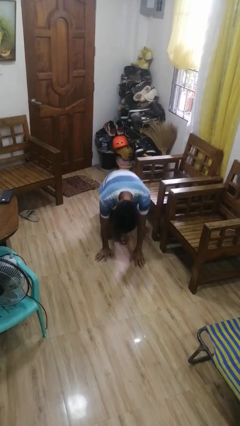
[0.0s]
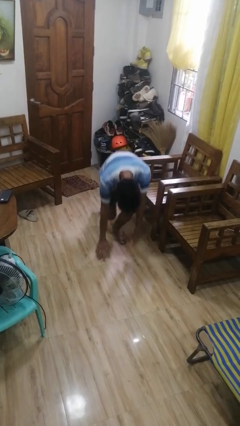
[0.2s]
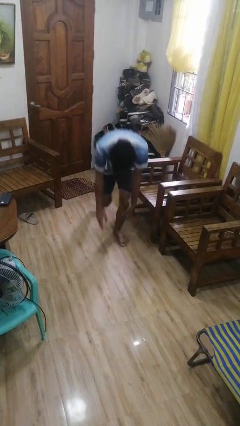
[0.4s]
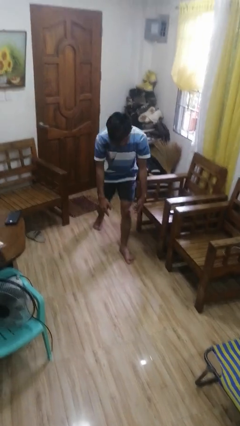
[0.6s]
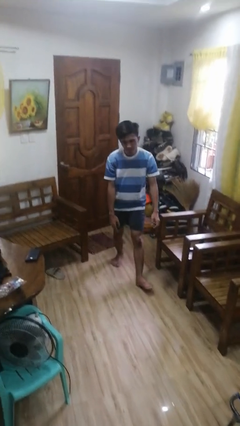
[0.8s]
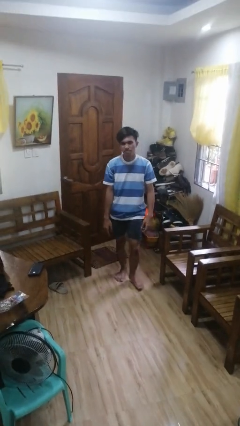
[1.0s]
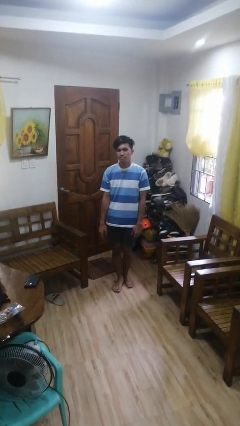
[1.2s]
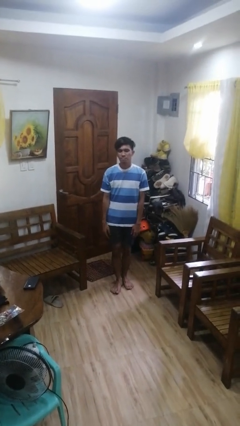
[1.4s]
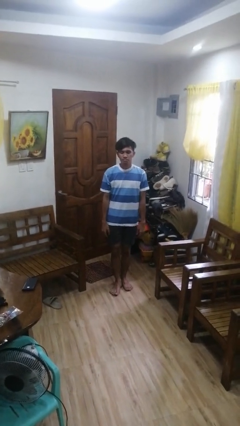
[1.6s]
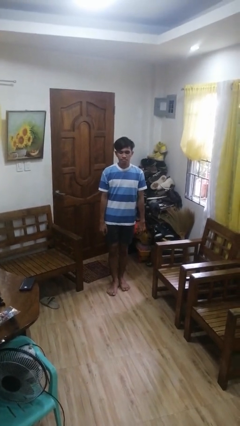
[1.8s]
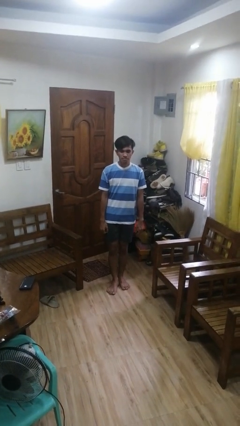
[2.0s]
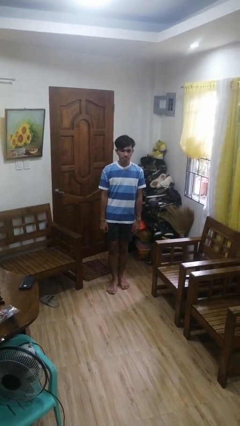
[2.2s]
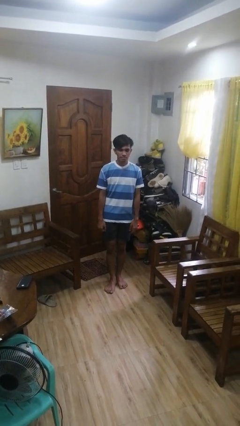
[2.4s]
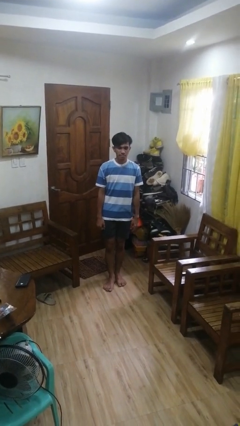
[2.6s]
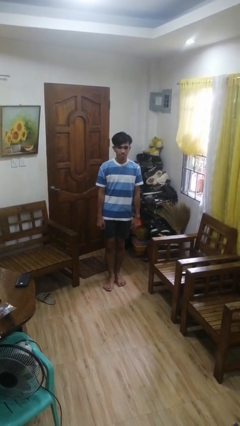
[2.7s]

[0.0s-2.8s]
person stands up from floor

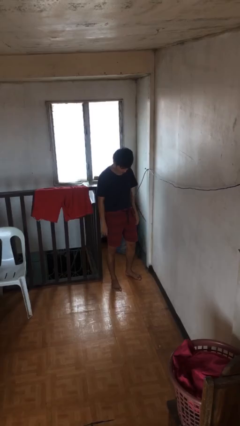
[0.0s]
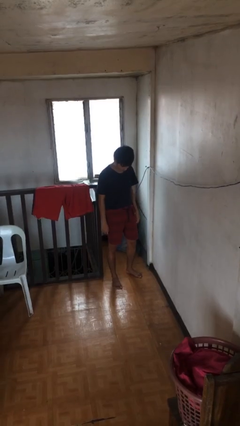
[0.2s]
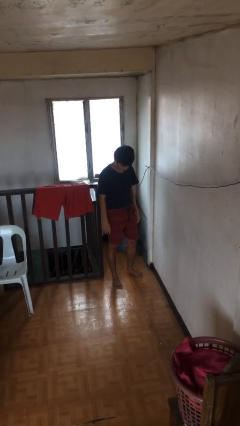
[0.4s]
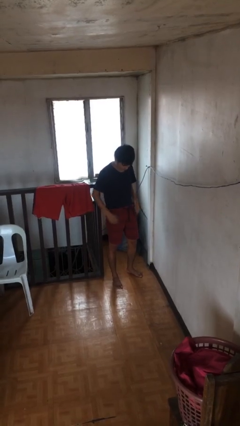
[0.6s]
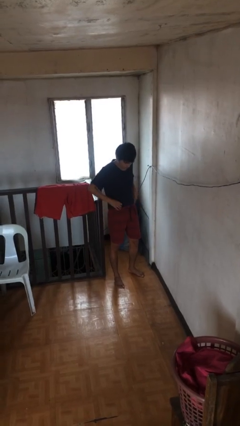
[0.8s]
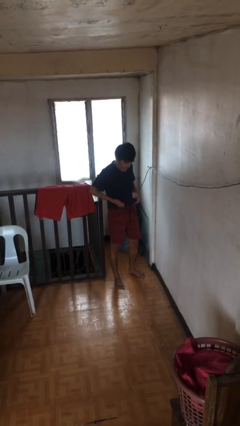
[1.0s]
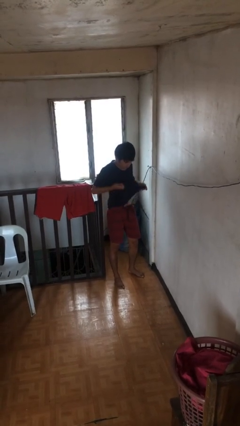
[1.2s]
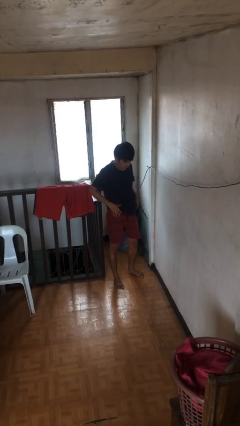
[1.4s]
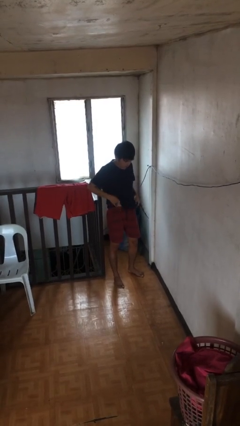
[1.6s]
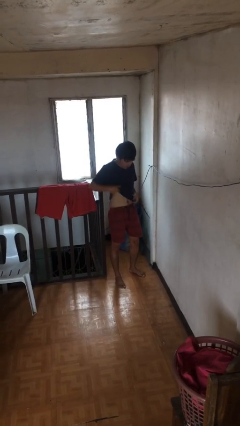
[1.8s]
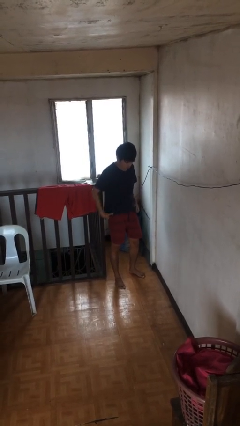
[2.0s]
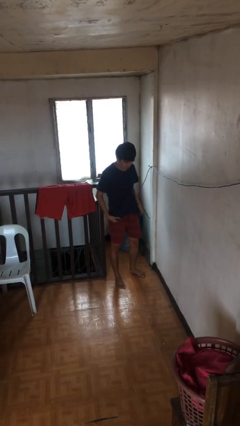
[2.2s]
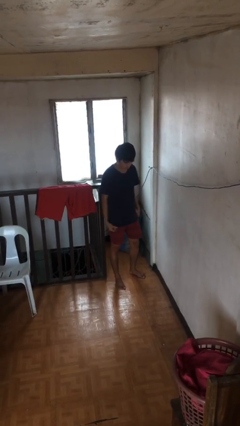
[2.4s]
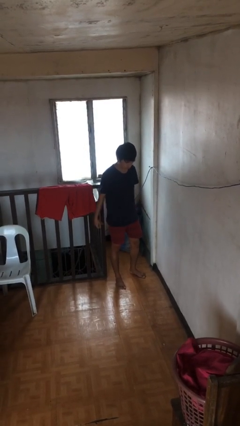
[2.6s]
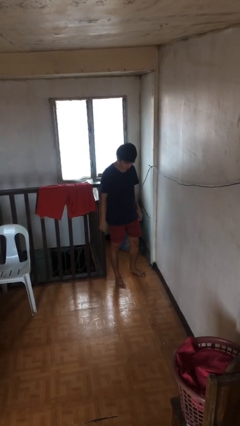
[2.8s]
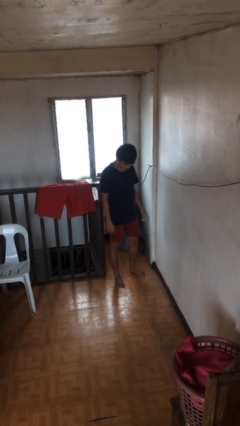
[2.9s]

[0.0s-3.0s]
person untucks shirt

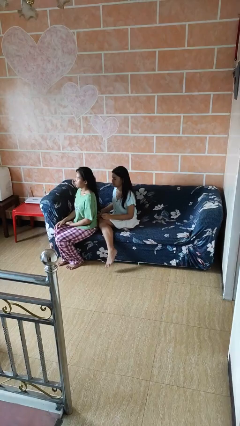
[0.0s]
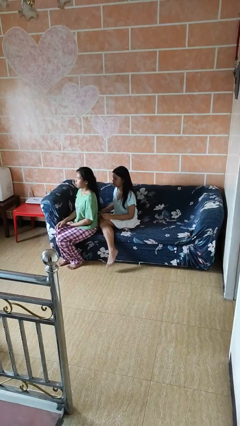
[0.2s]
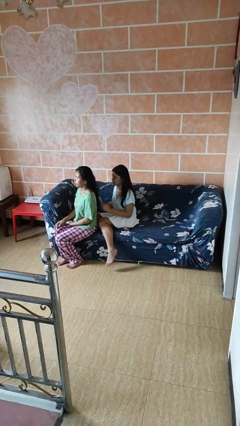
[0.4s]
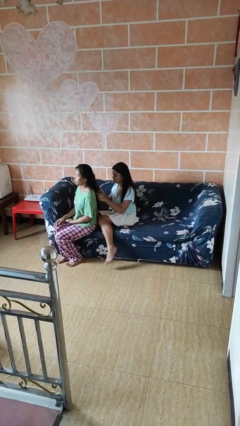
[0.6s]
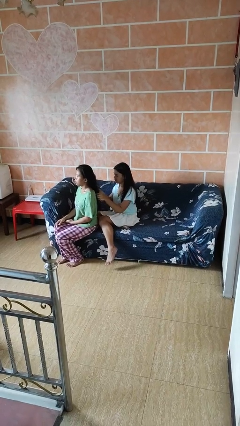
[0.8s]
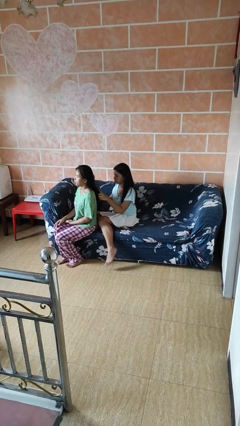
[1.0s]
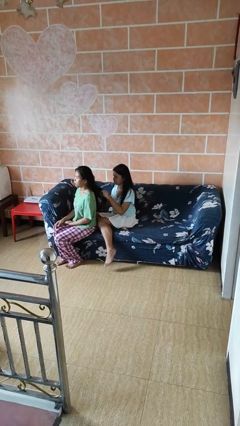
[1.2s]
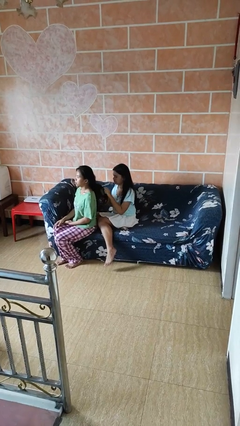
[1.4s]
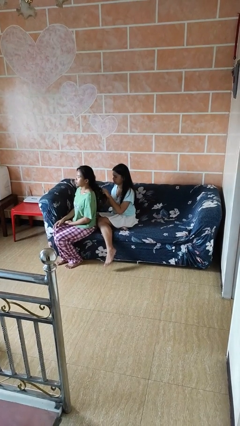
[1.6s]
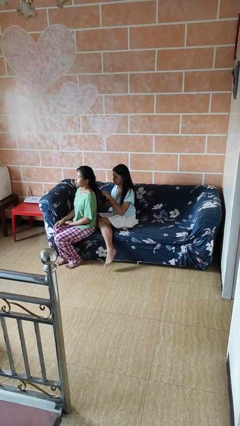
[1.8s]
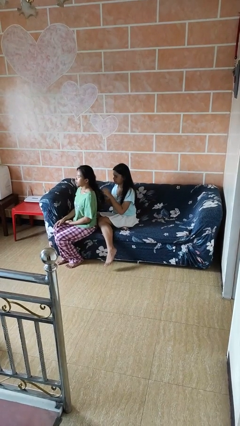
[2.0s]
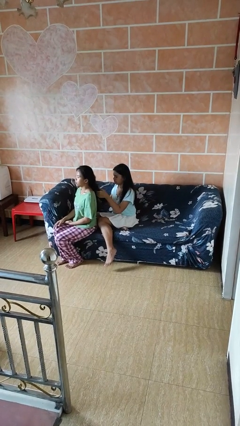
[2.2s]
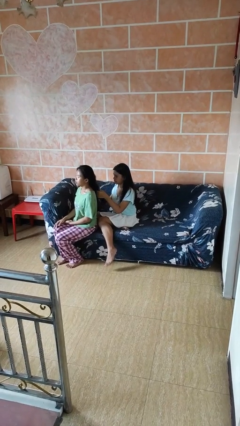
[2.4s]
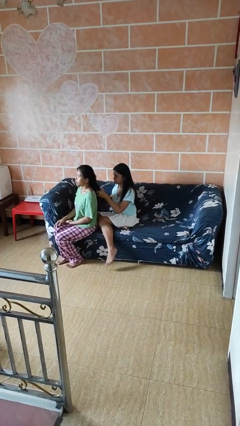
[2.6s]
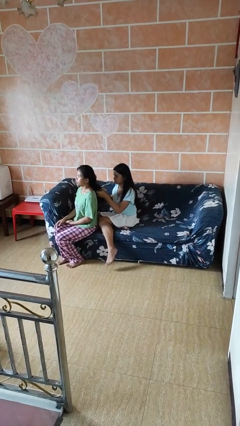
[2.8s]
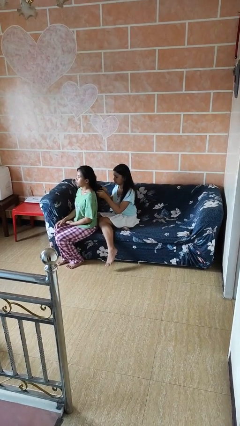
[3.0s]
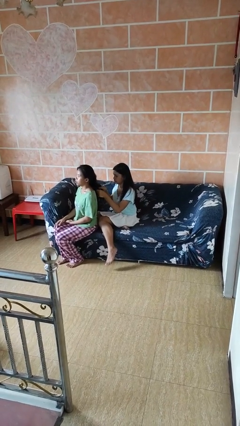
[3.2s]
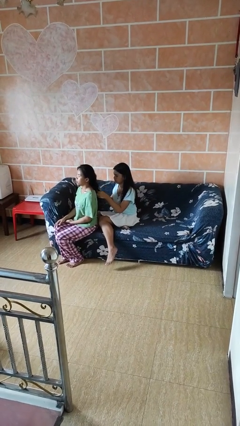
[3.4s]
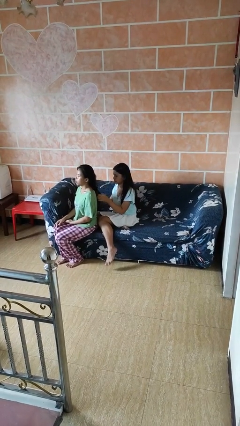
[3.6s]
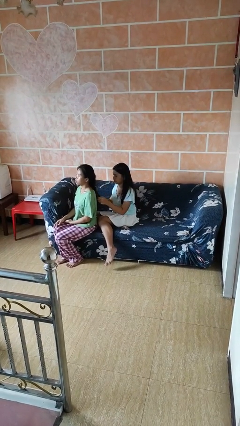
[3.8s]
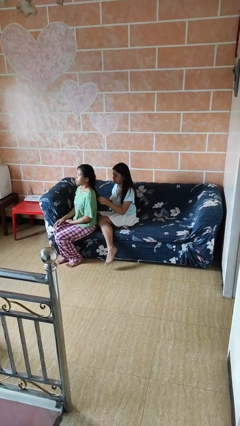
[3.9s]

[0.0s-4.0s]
person braids hair of person

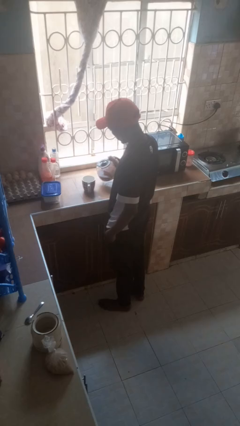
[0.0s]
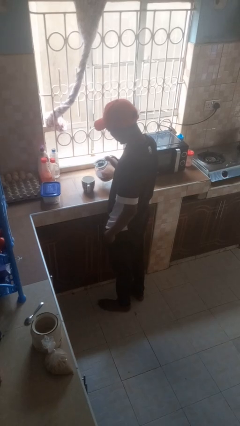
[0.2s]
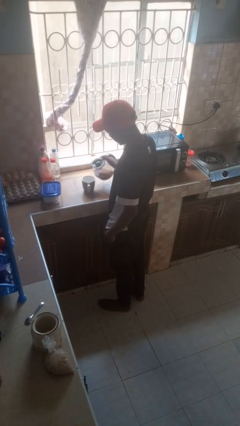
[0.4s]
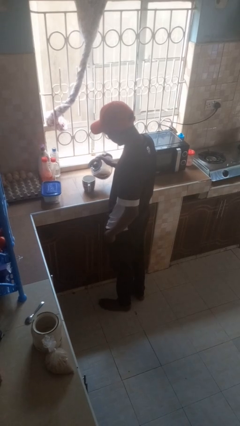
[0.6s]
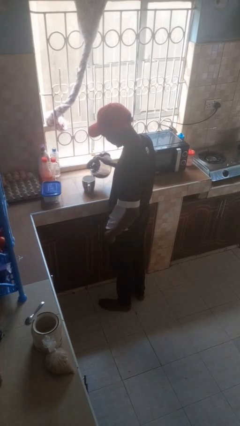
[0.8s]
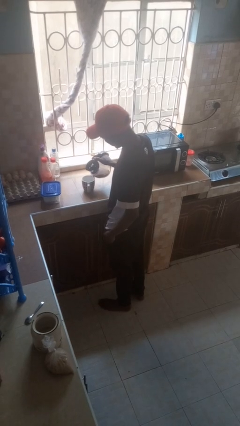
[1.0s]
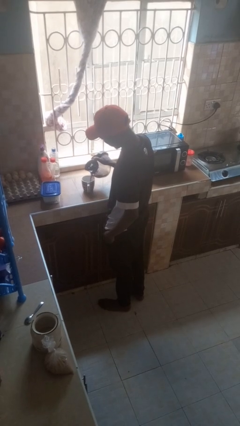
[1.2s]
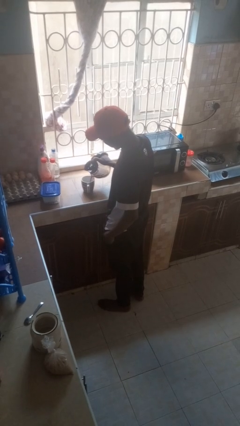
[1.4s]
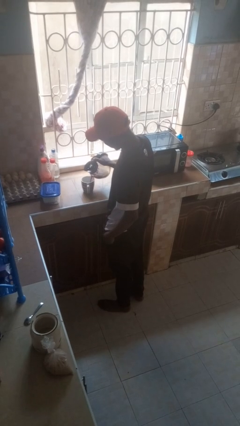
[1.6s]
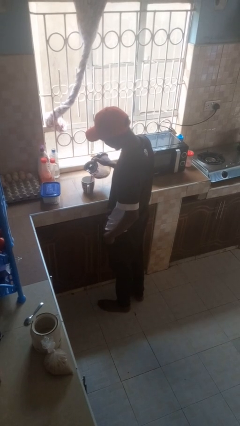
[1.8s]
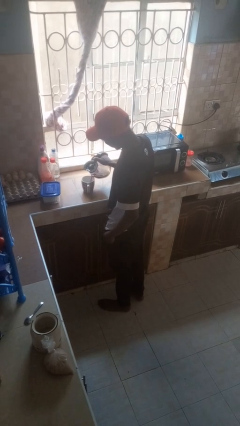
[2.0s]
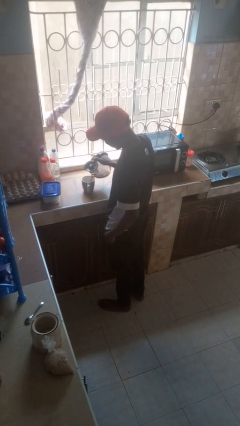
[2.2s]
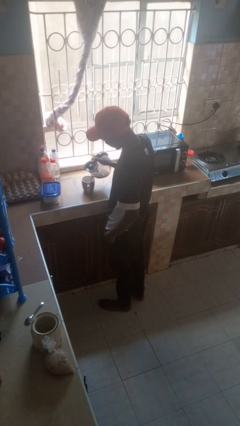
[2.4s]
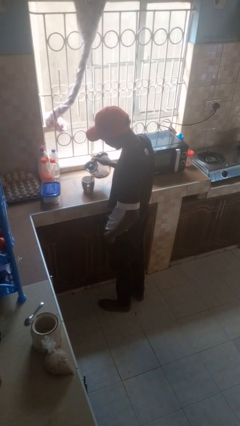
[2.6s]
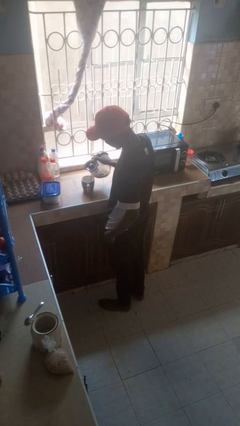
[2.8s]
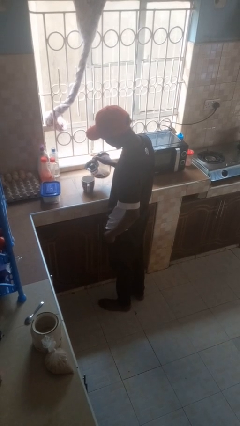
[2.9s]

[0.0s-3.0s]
person pours coffee into mug

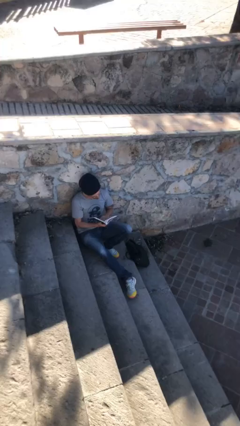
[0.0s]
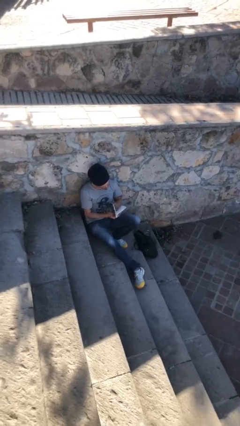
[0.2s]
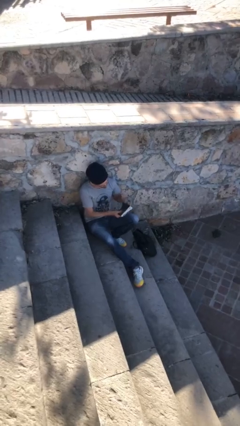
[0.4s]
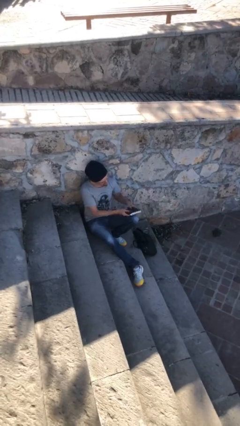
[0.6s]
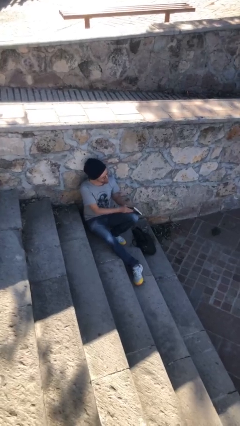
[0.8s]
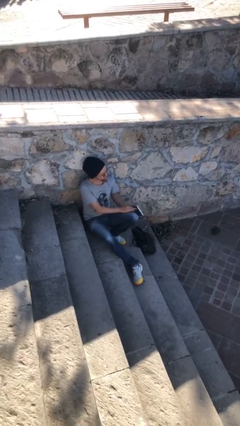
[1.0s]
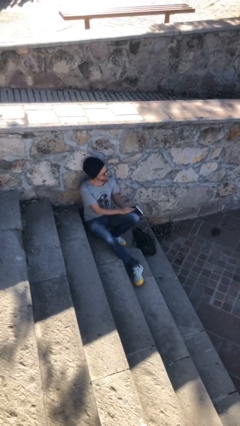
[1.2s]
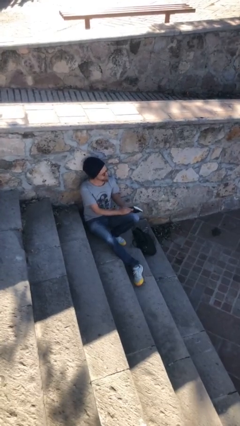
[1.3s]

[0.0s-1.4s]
person reads document

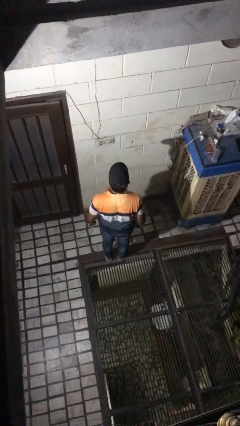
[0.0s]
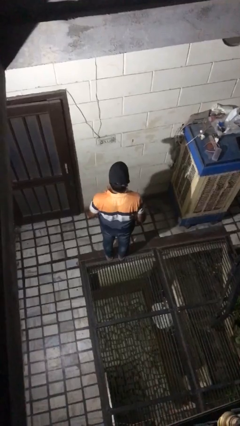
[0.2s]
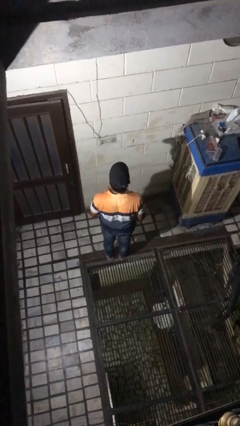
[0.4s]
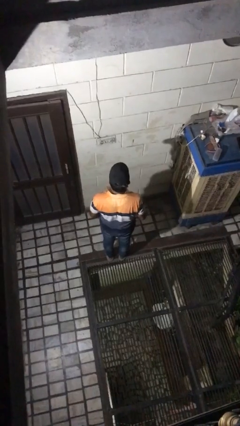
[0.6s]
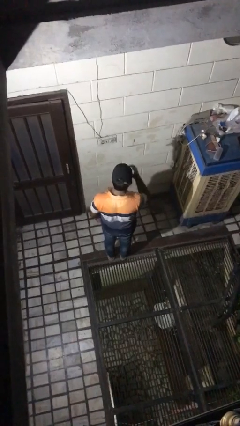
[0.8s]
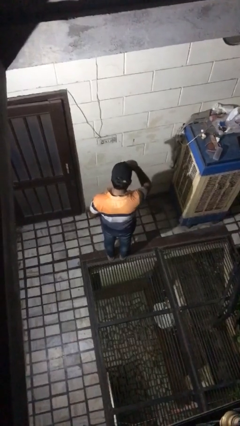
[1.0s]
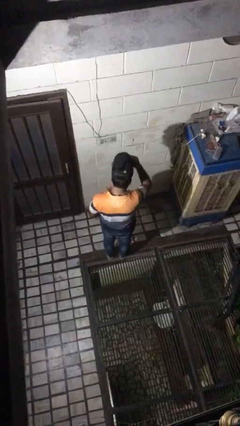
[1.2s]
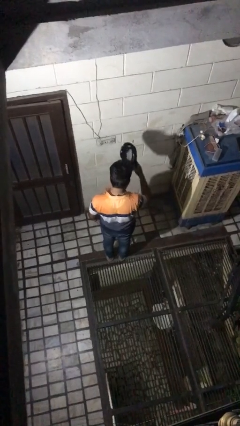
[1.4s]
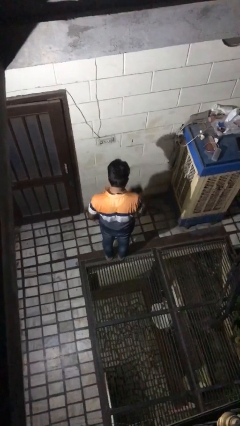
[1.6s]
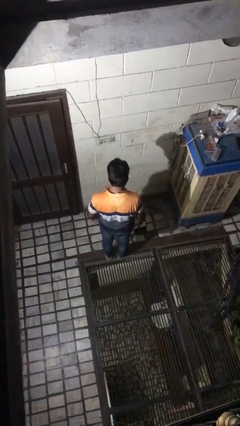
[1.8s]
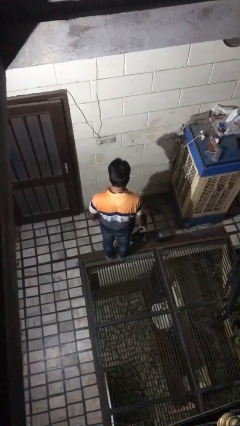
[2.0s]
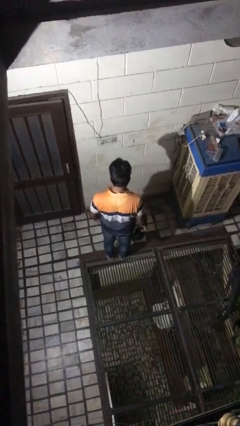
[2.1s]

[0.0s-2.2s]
person takes off hat

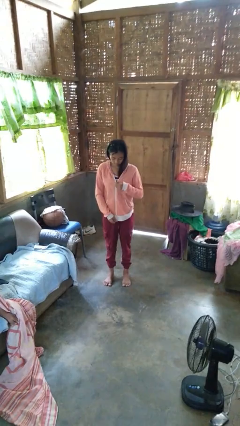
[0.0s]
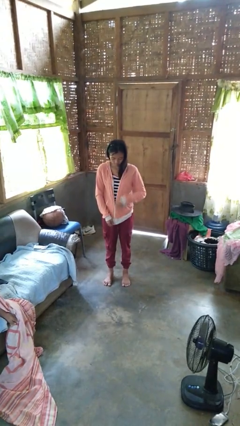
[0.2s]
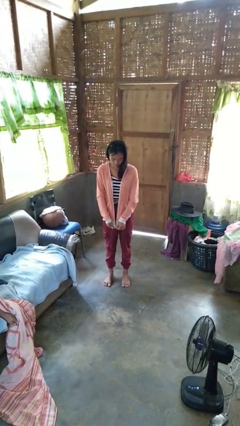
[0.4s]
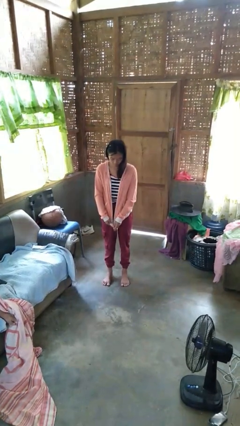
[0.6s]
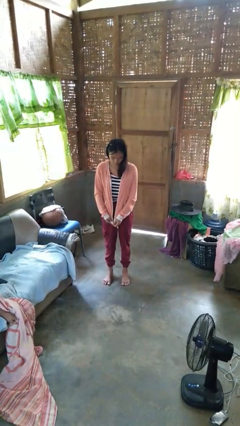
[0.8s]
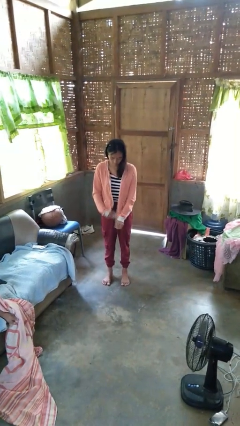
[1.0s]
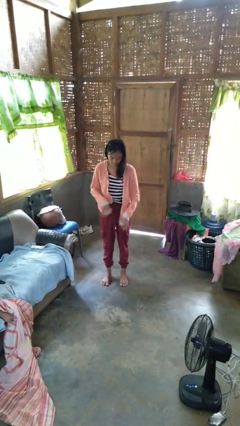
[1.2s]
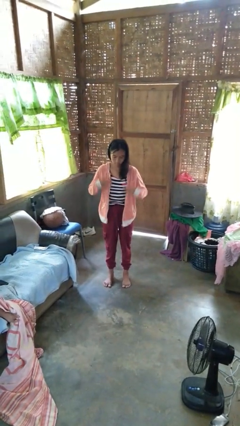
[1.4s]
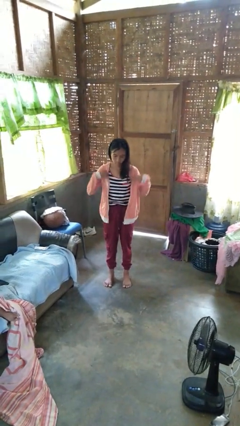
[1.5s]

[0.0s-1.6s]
person unzips jacket
